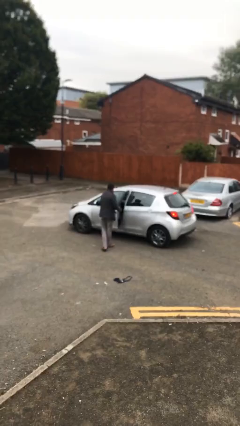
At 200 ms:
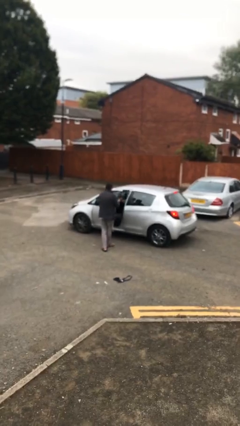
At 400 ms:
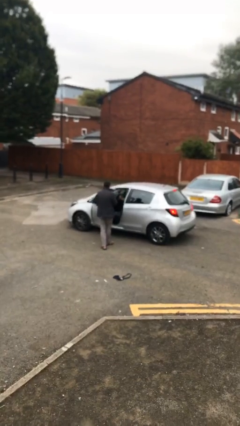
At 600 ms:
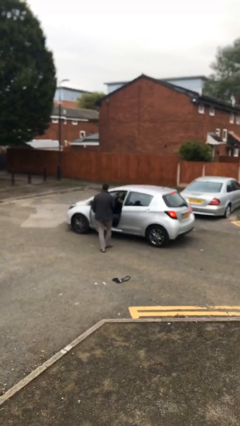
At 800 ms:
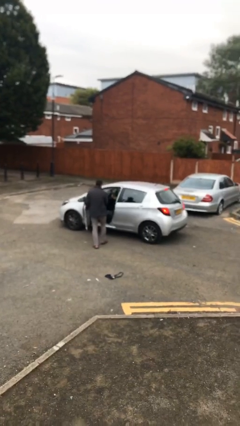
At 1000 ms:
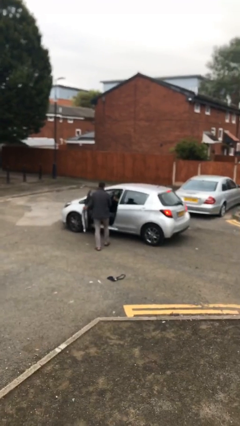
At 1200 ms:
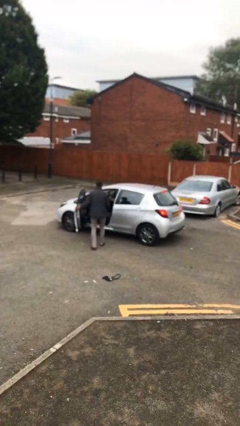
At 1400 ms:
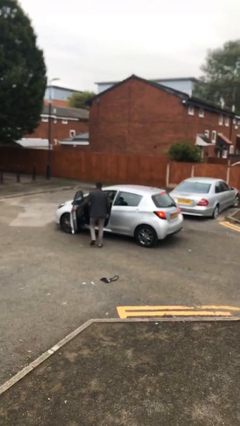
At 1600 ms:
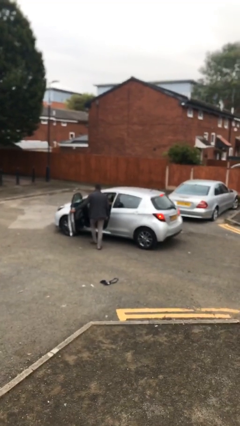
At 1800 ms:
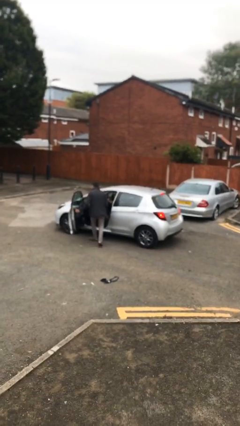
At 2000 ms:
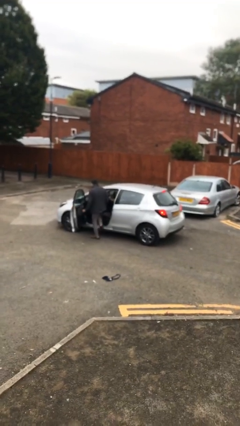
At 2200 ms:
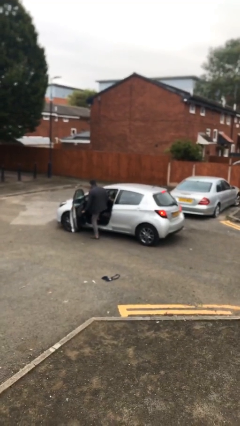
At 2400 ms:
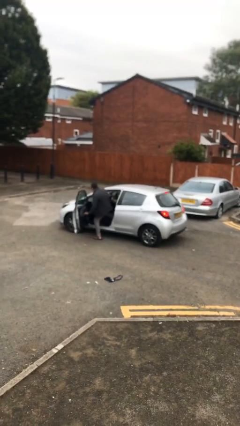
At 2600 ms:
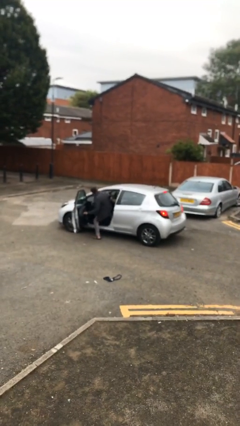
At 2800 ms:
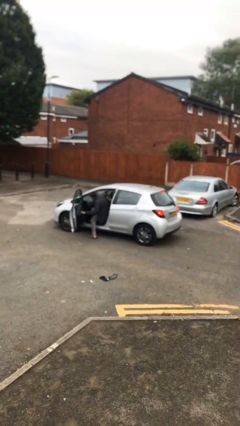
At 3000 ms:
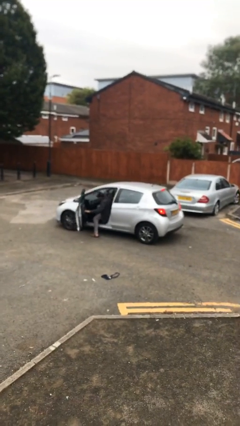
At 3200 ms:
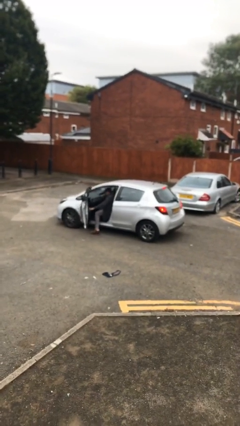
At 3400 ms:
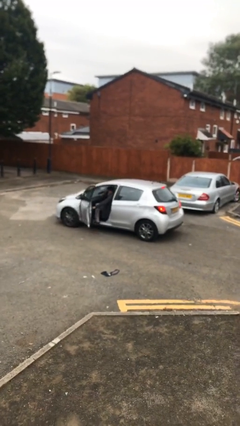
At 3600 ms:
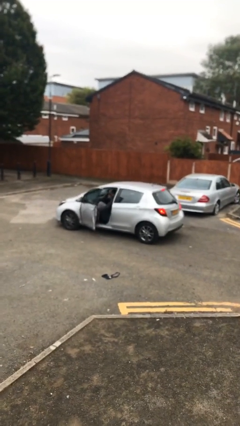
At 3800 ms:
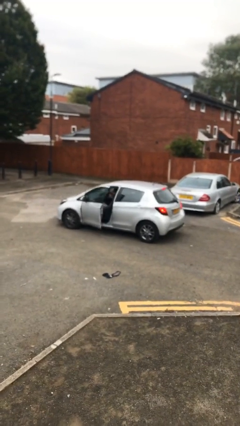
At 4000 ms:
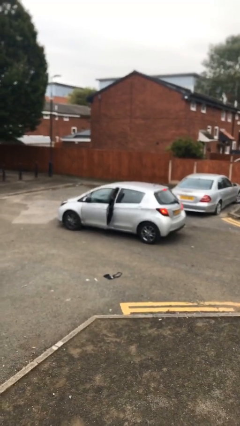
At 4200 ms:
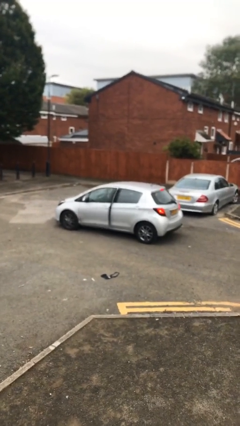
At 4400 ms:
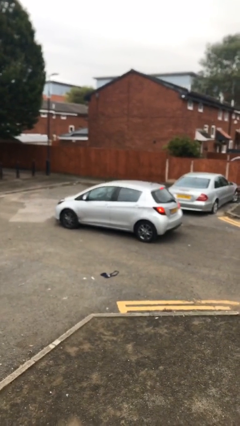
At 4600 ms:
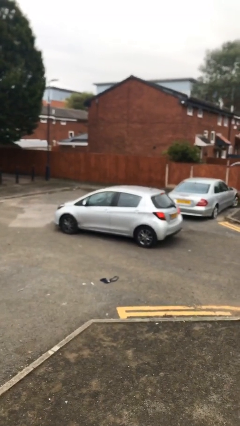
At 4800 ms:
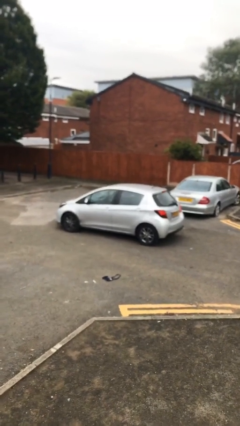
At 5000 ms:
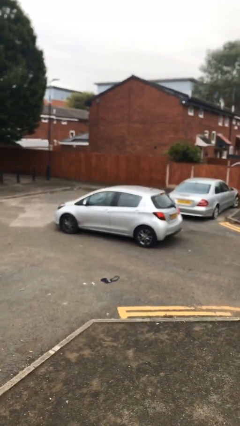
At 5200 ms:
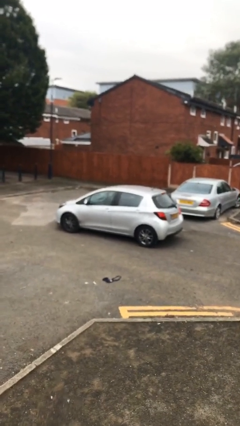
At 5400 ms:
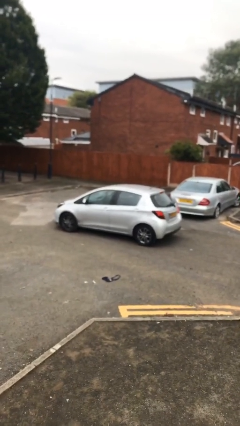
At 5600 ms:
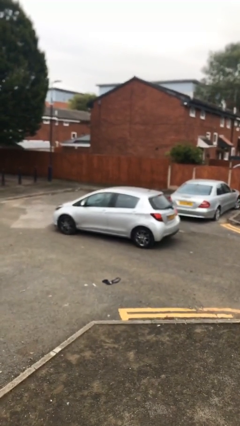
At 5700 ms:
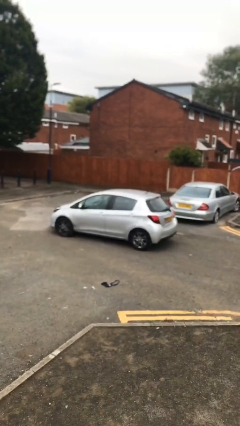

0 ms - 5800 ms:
car picks up person

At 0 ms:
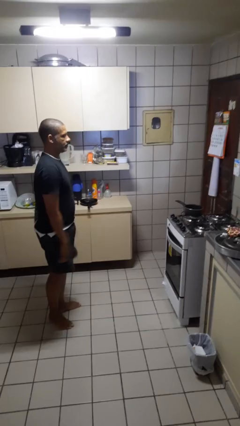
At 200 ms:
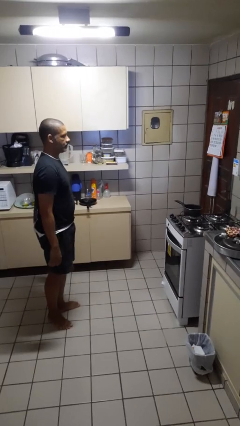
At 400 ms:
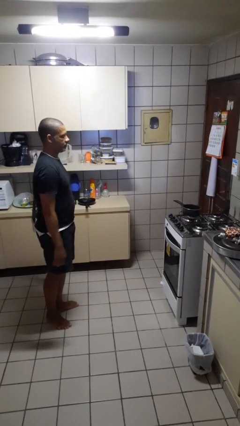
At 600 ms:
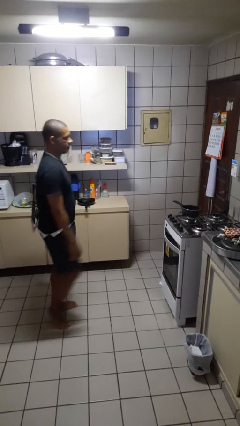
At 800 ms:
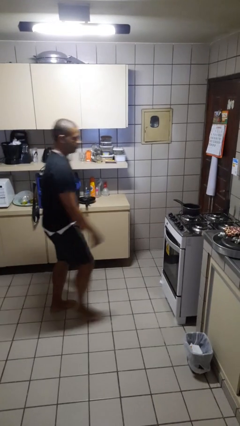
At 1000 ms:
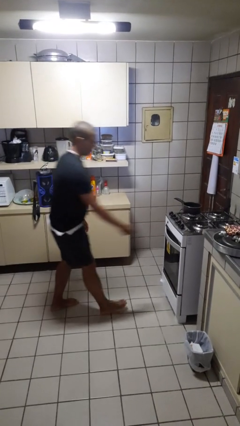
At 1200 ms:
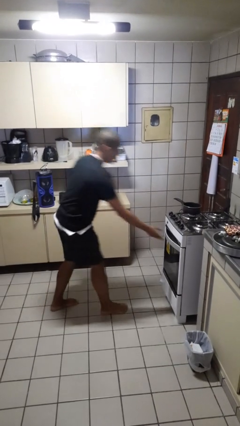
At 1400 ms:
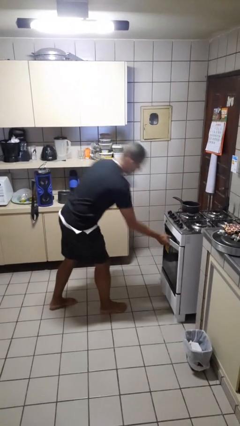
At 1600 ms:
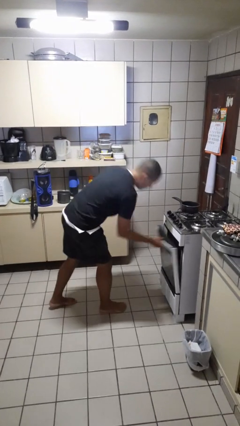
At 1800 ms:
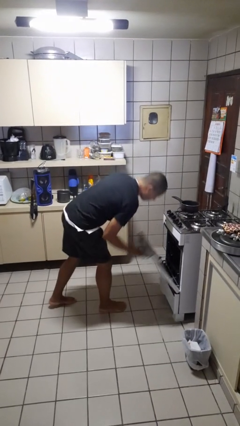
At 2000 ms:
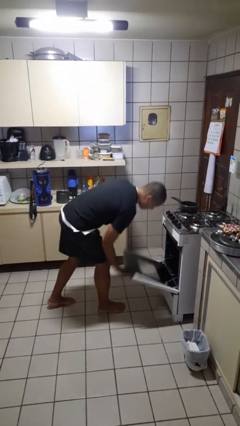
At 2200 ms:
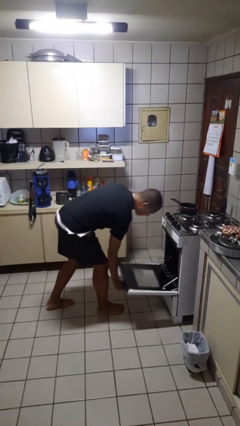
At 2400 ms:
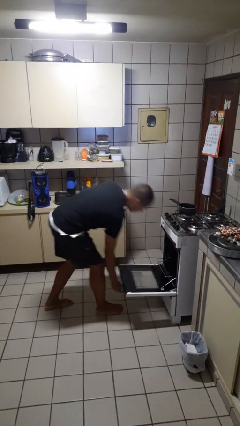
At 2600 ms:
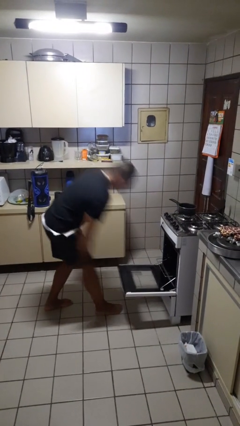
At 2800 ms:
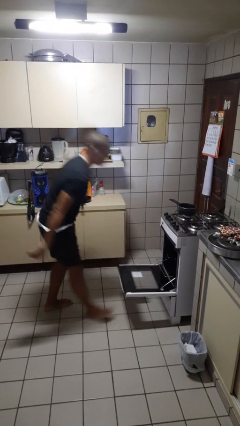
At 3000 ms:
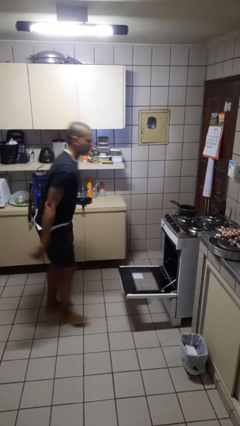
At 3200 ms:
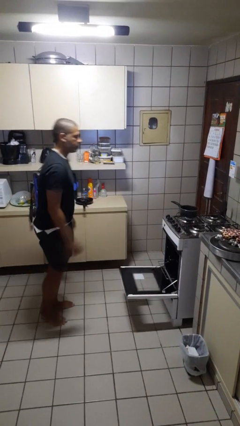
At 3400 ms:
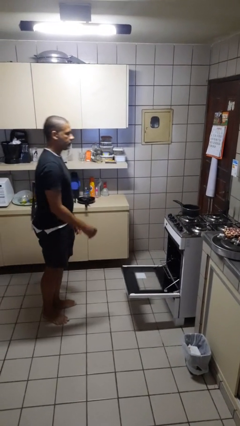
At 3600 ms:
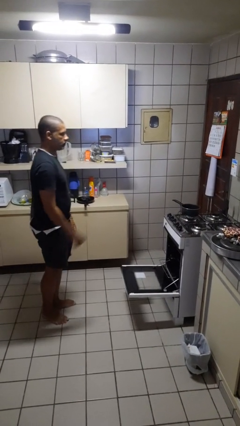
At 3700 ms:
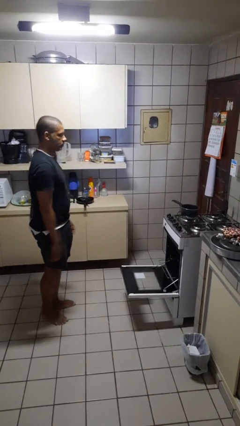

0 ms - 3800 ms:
person opens oven door

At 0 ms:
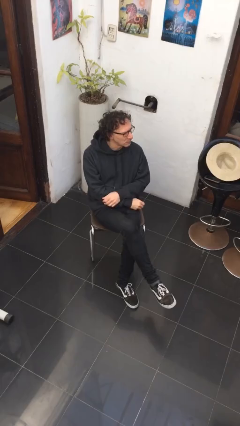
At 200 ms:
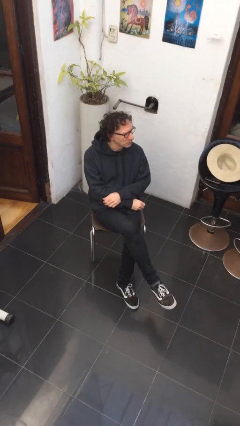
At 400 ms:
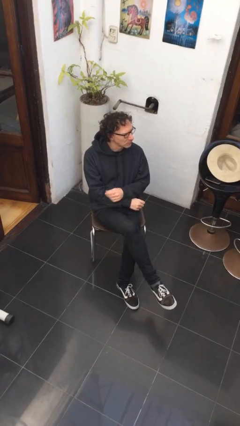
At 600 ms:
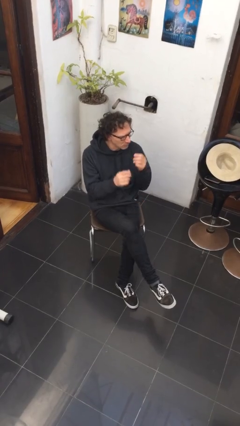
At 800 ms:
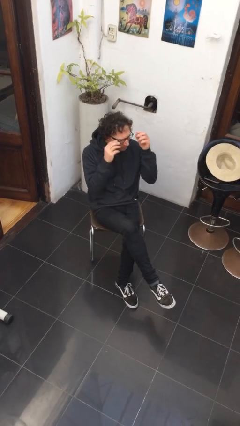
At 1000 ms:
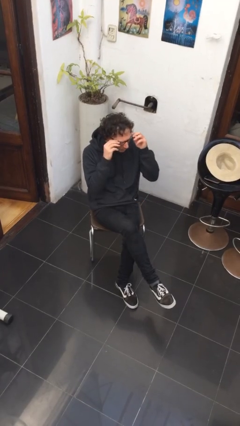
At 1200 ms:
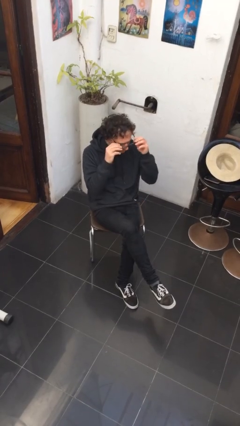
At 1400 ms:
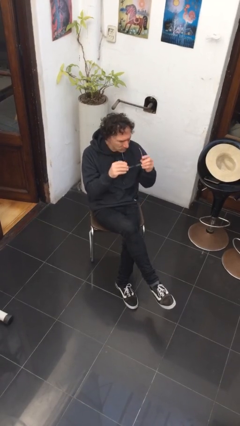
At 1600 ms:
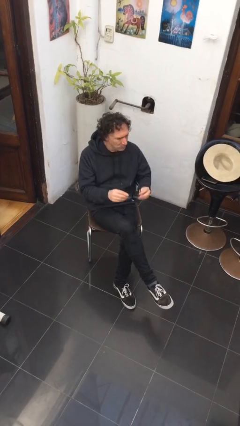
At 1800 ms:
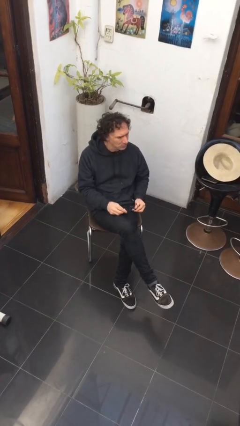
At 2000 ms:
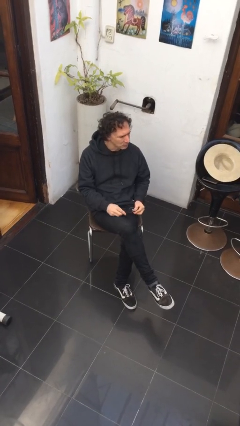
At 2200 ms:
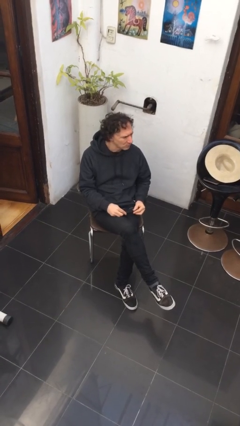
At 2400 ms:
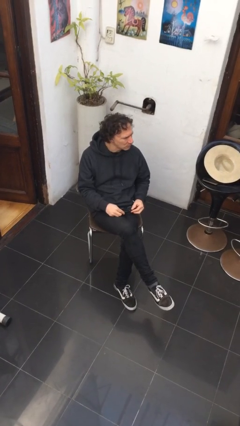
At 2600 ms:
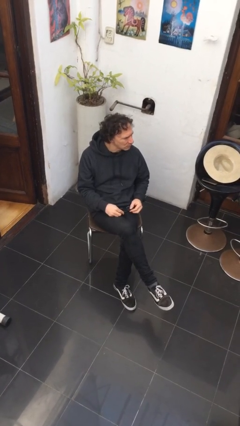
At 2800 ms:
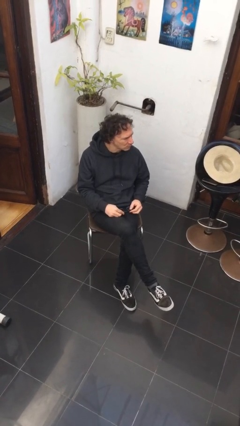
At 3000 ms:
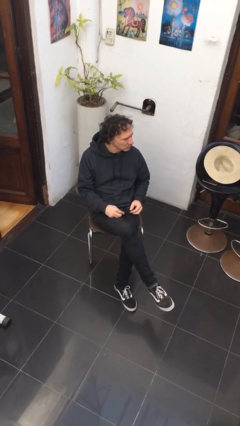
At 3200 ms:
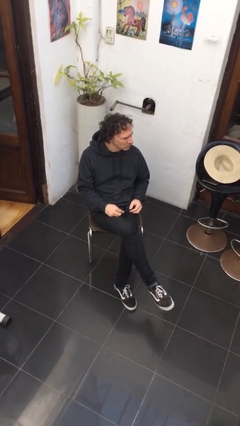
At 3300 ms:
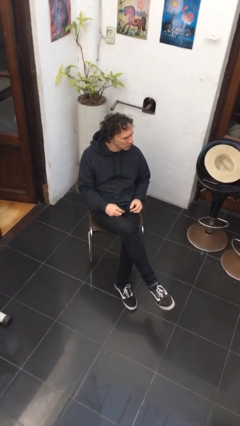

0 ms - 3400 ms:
person takes off glasses

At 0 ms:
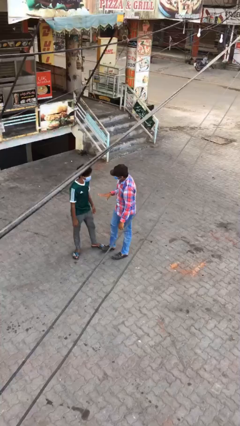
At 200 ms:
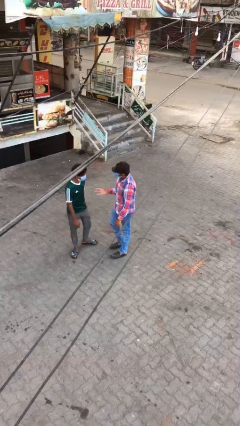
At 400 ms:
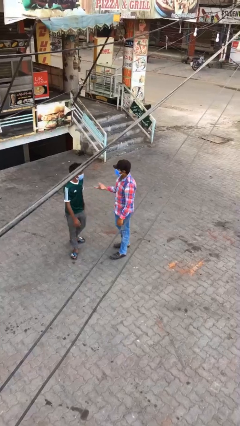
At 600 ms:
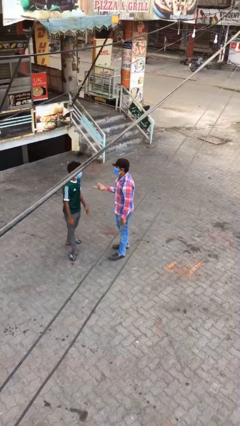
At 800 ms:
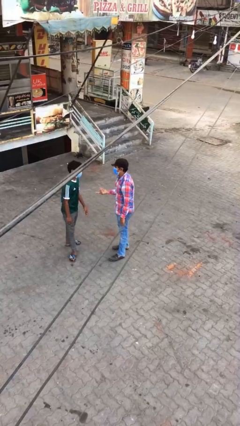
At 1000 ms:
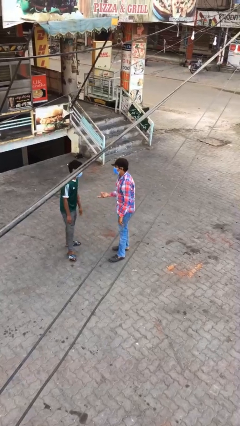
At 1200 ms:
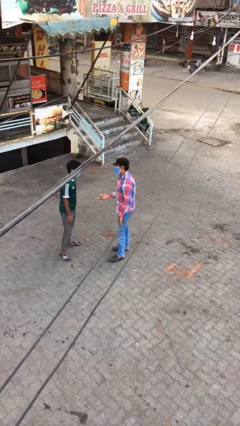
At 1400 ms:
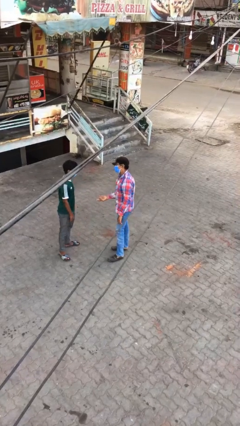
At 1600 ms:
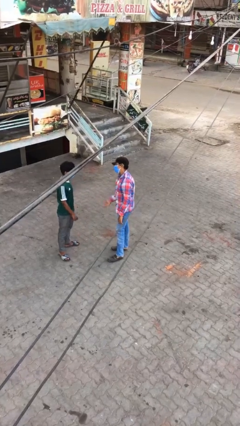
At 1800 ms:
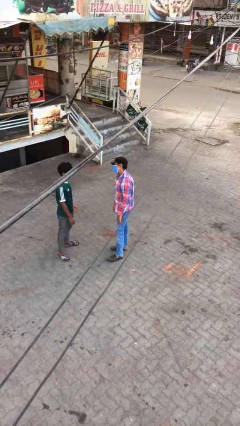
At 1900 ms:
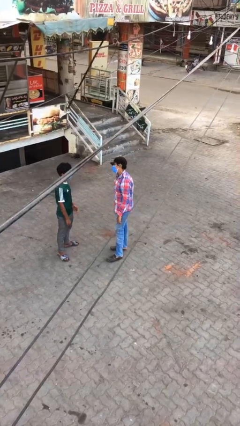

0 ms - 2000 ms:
person talks to person

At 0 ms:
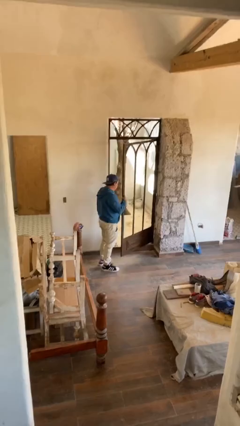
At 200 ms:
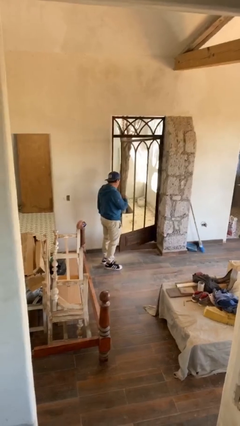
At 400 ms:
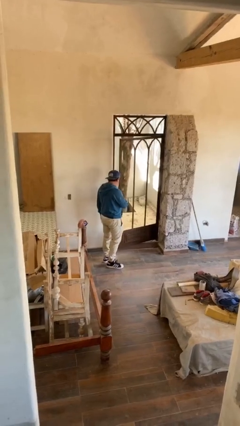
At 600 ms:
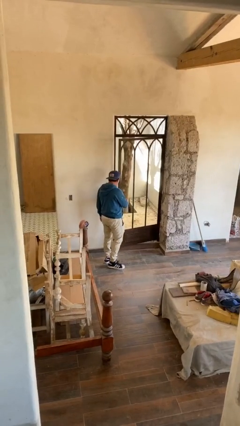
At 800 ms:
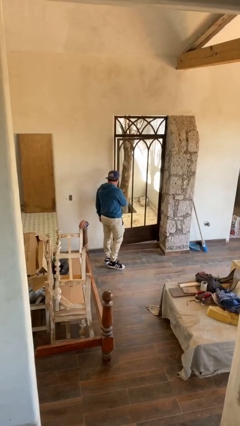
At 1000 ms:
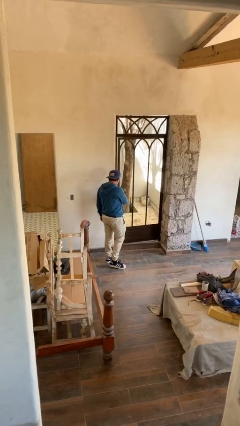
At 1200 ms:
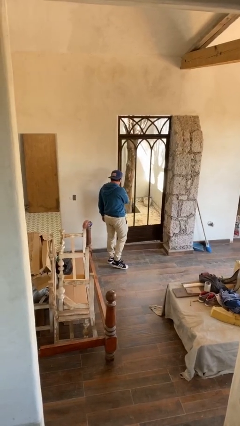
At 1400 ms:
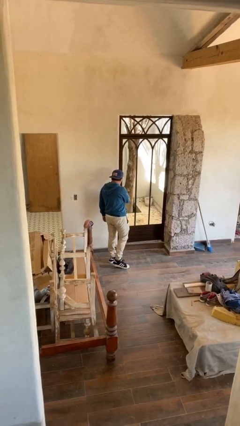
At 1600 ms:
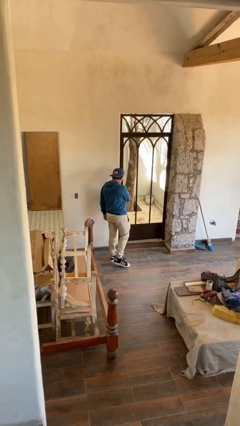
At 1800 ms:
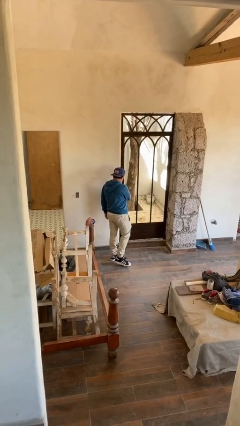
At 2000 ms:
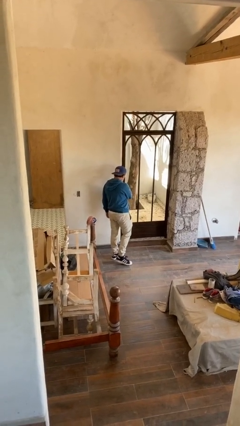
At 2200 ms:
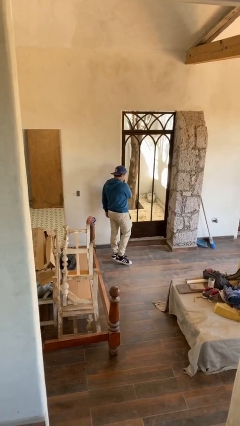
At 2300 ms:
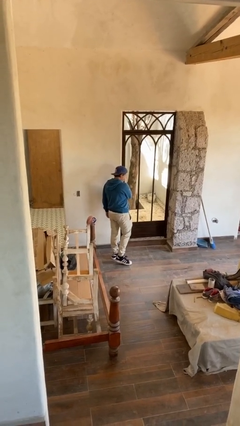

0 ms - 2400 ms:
person closes facility door

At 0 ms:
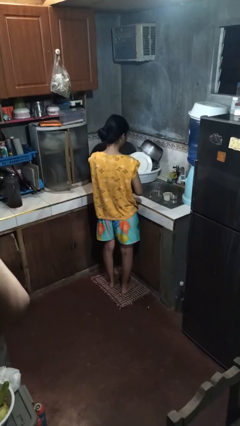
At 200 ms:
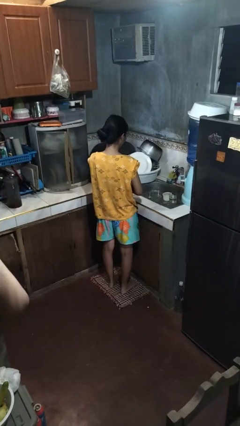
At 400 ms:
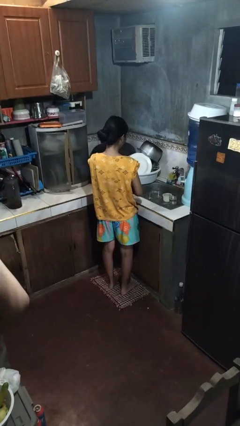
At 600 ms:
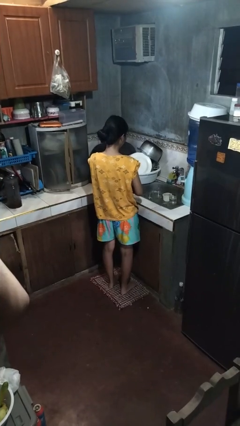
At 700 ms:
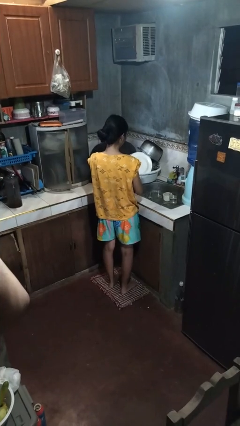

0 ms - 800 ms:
person turns on faucet
